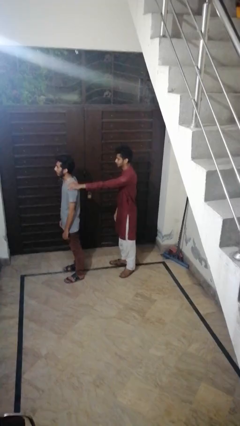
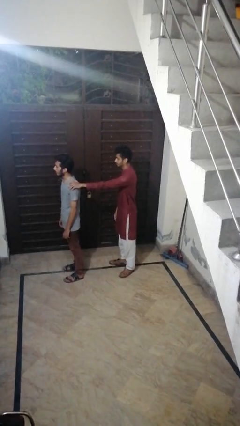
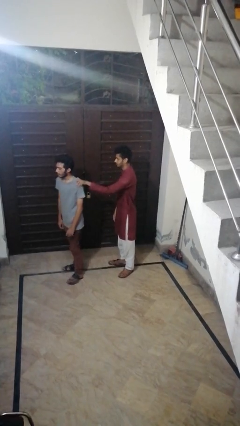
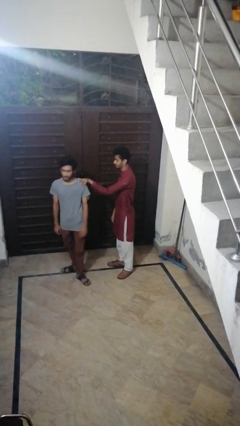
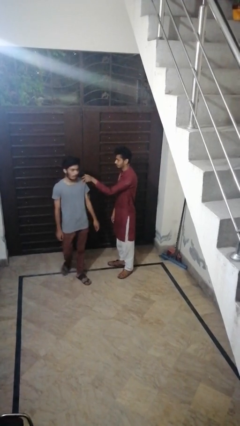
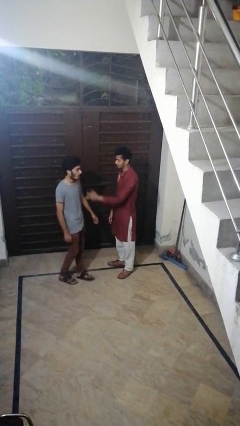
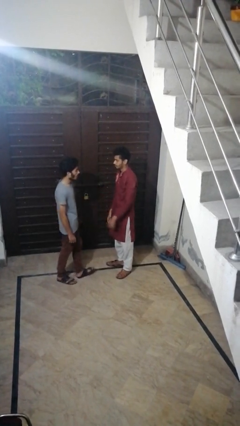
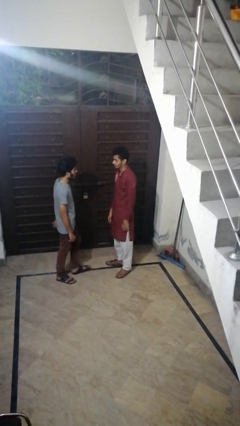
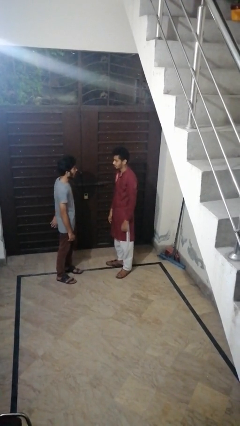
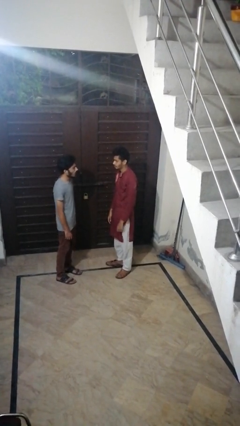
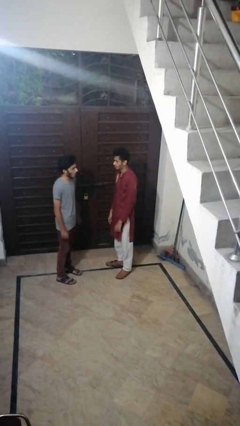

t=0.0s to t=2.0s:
person spins person around

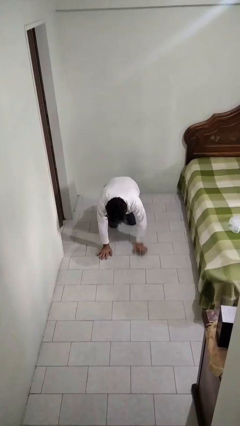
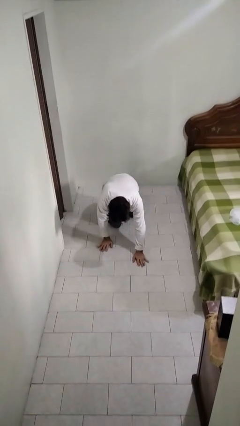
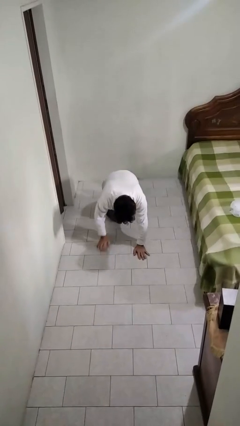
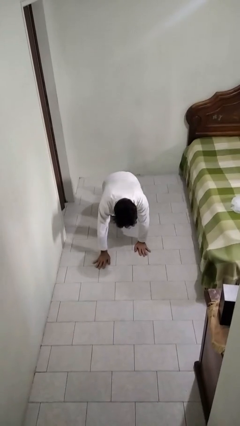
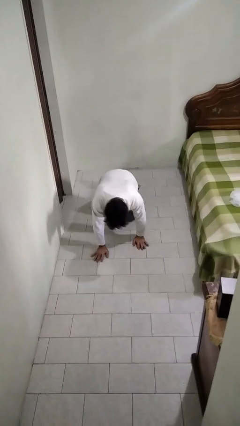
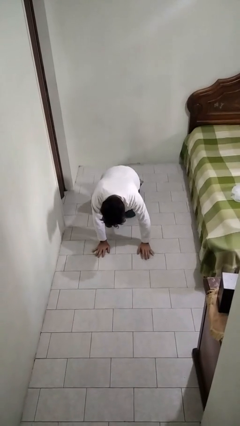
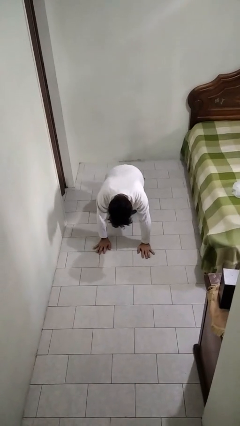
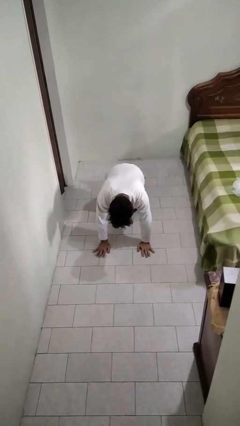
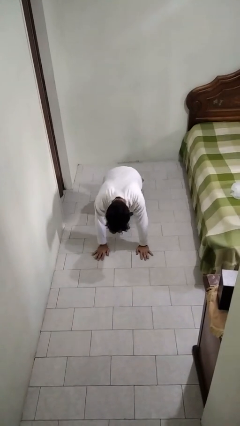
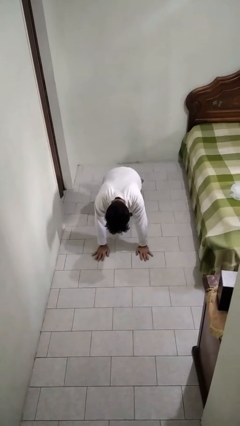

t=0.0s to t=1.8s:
person crawls

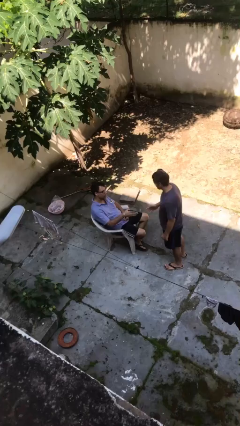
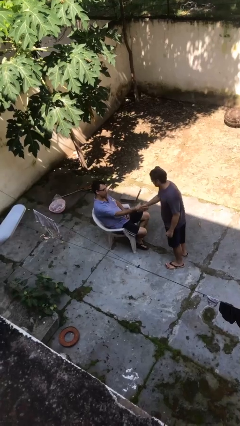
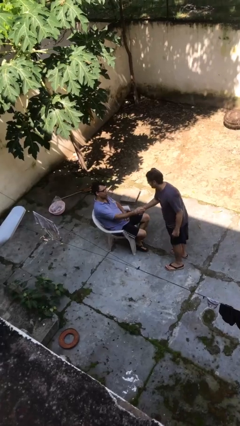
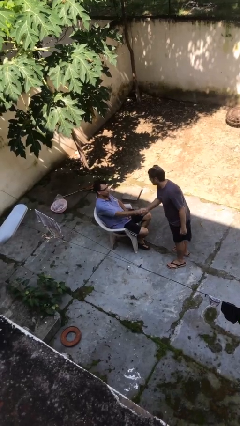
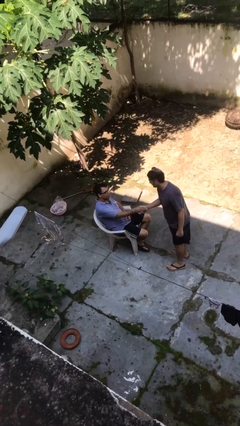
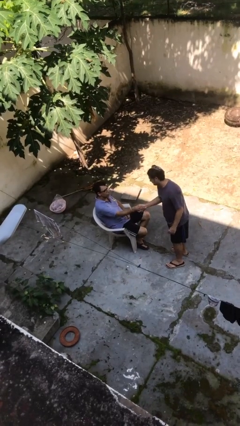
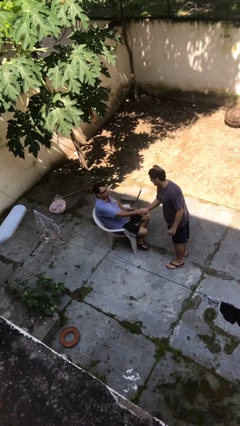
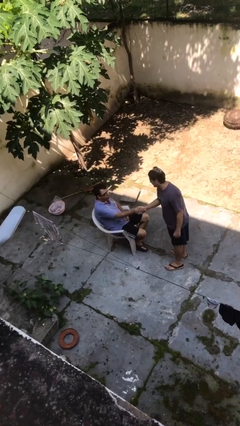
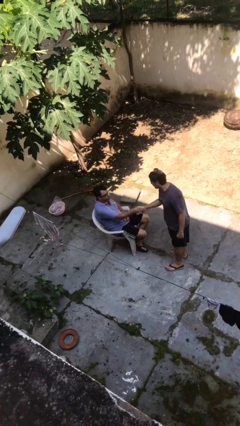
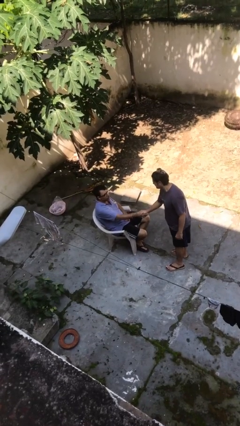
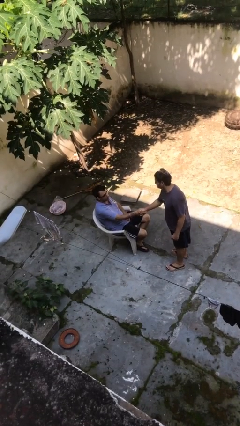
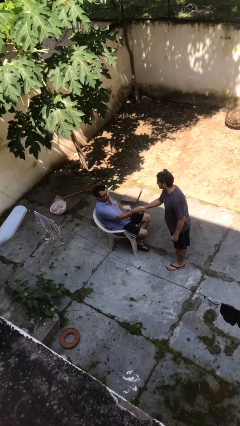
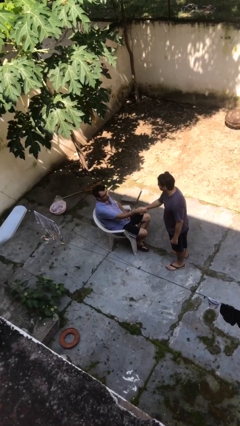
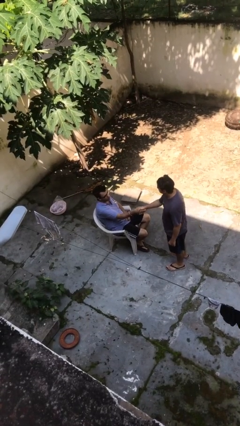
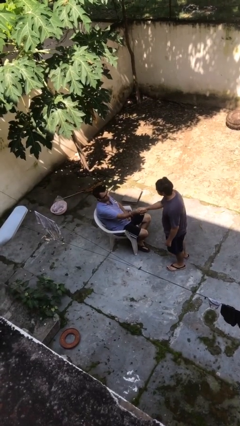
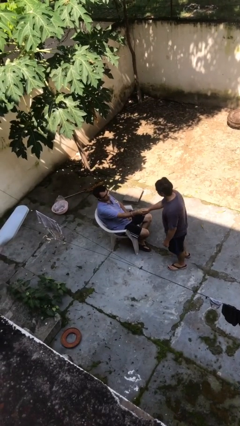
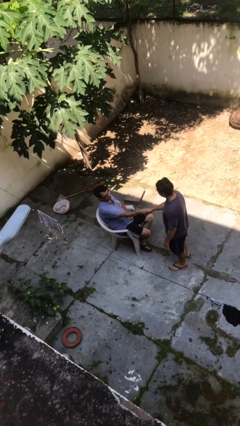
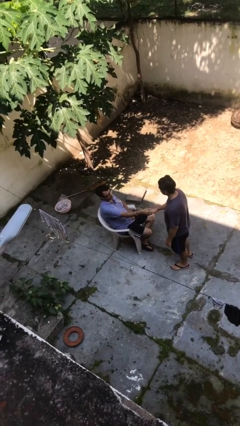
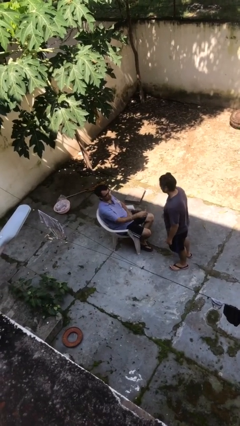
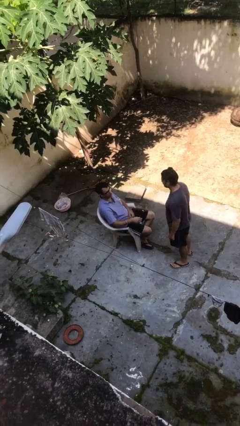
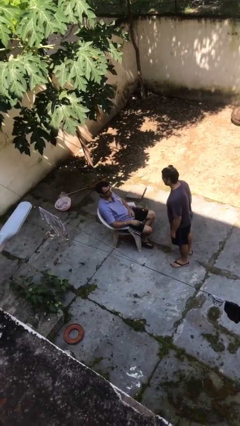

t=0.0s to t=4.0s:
person shakes hand

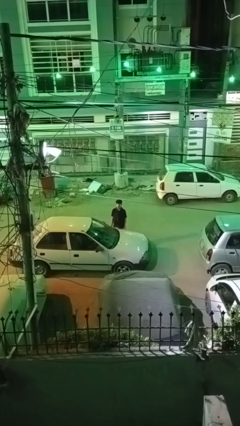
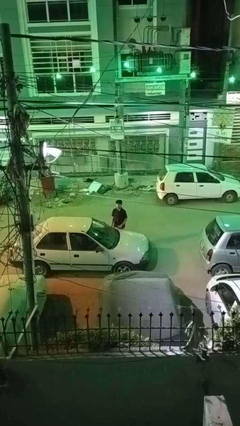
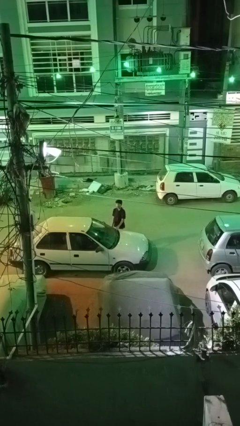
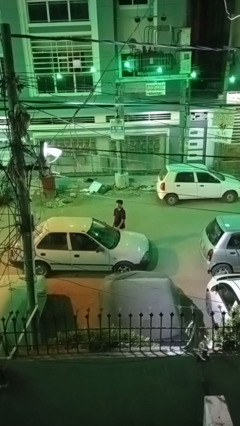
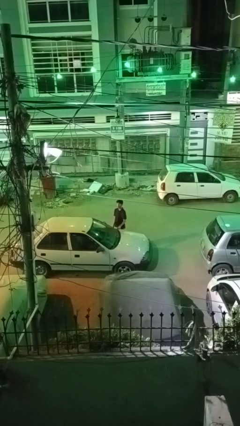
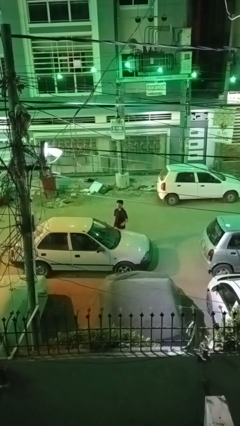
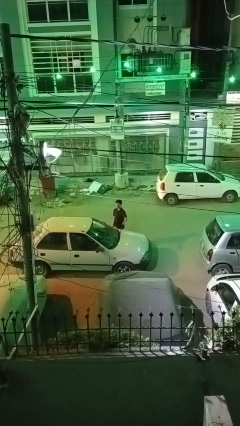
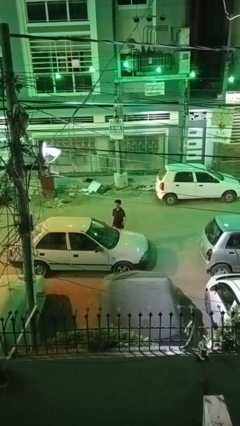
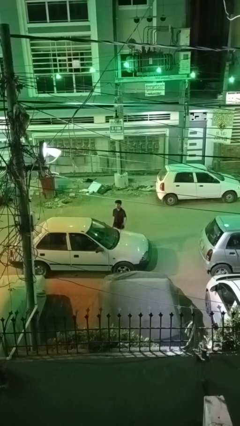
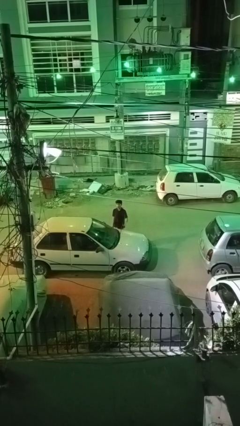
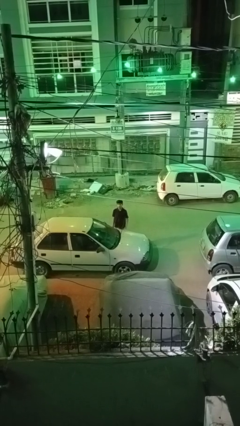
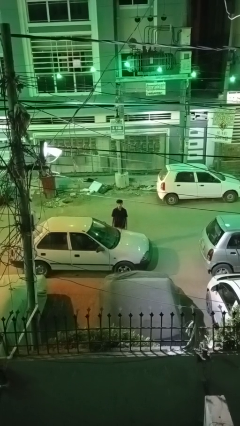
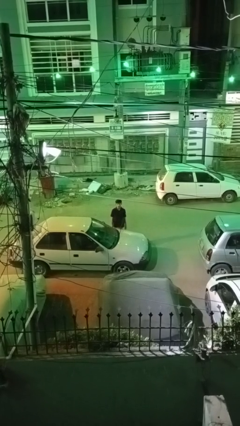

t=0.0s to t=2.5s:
person flips up car wipers

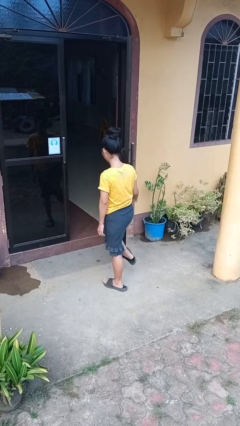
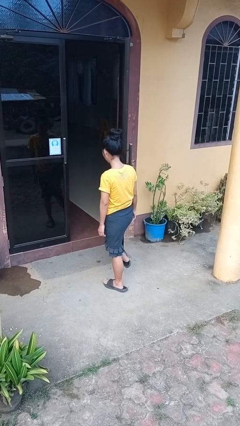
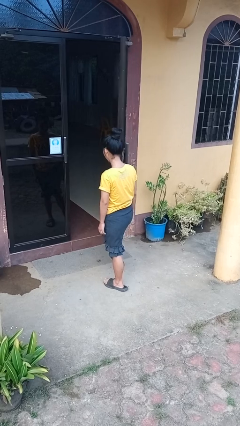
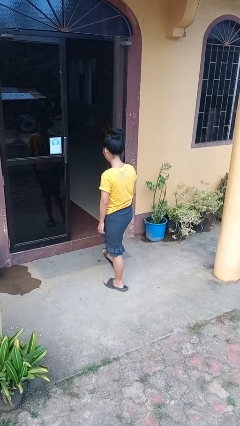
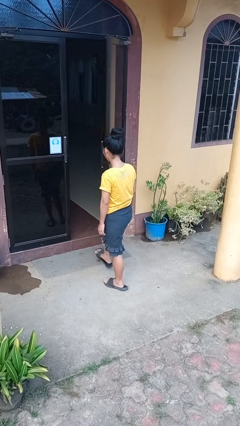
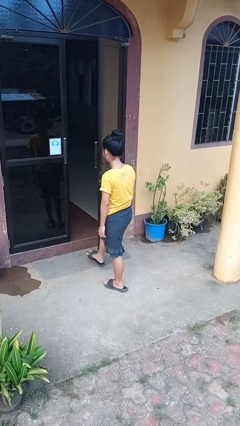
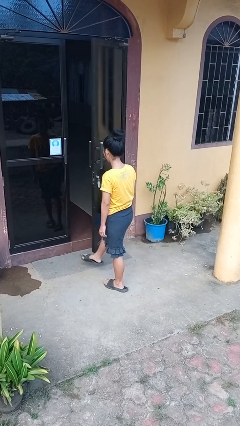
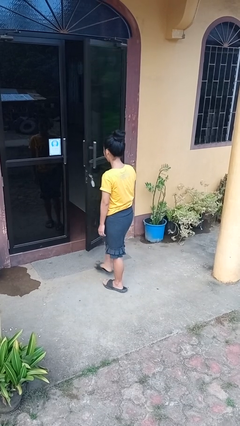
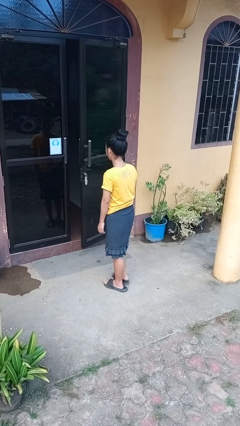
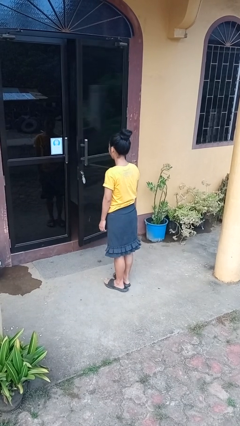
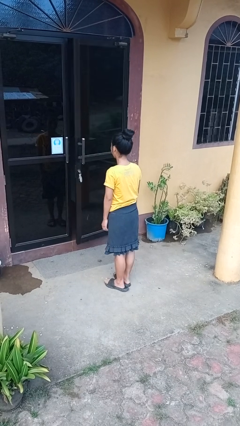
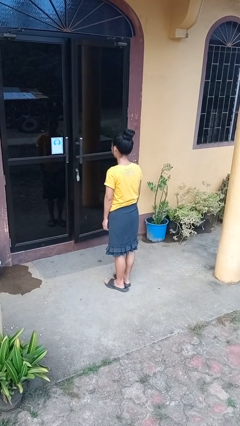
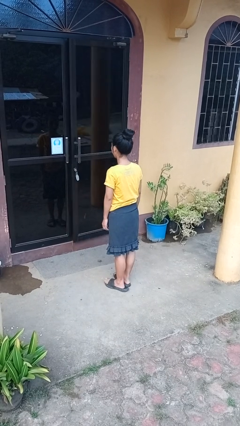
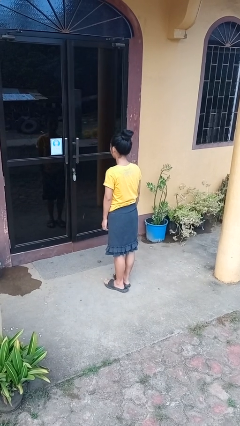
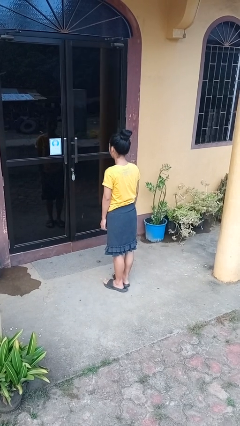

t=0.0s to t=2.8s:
person closes door with foot

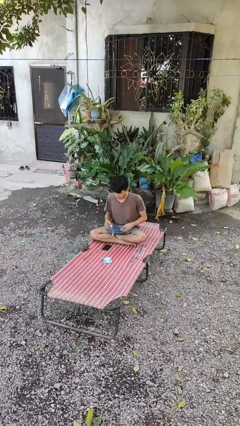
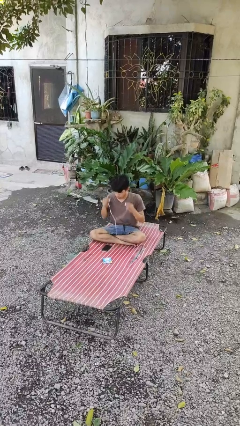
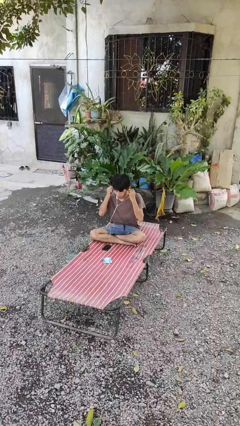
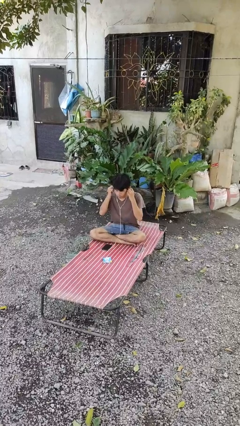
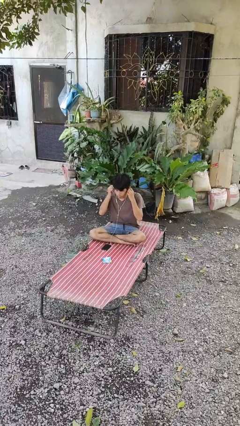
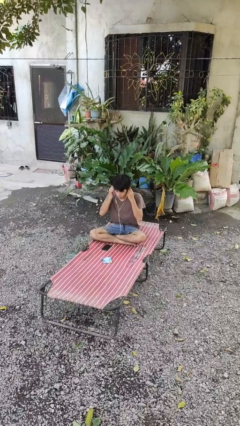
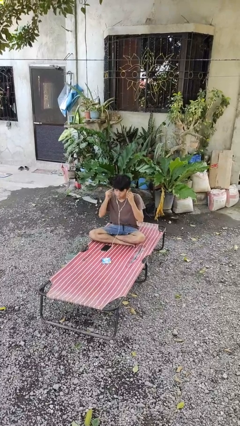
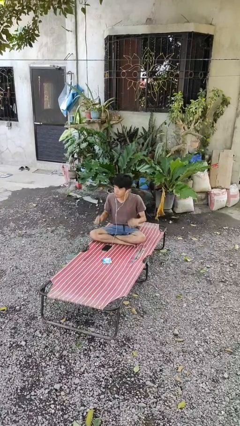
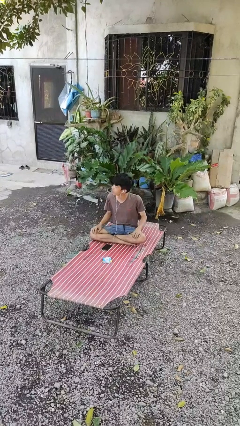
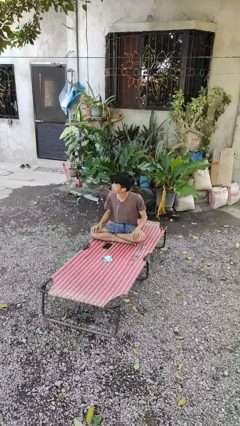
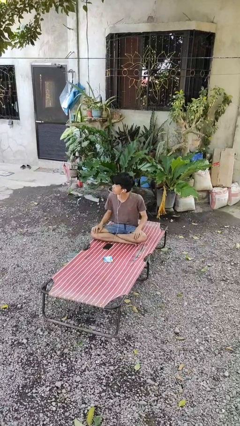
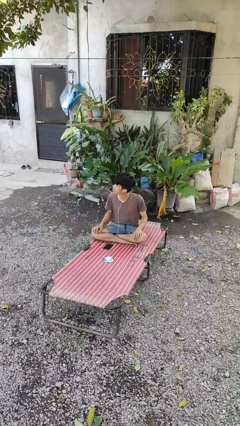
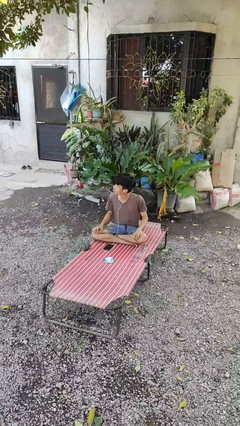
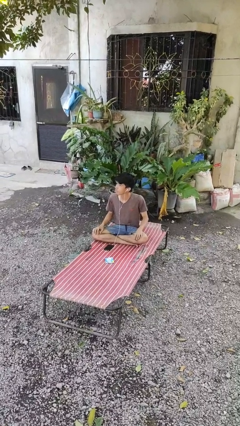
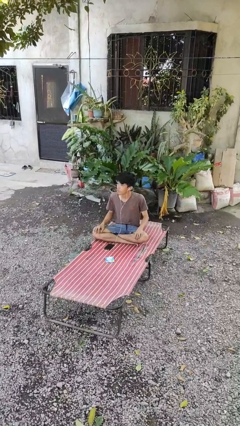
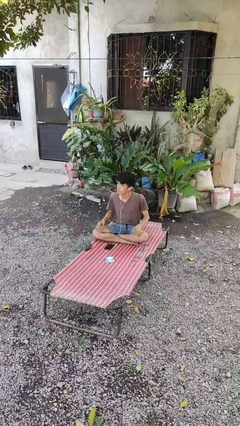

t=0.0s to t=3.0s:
person puts on headphones

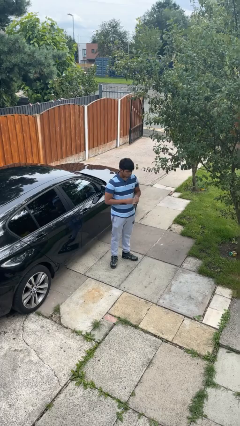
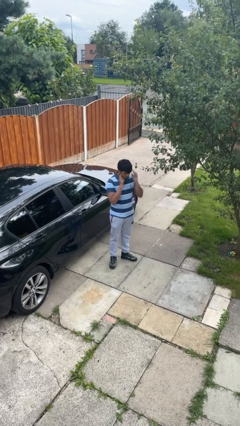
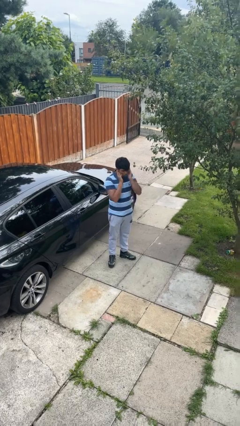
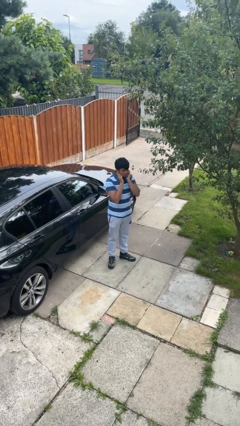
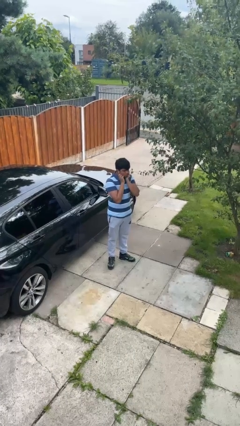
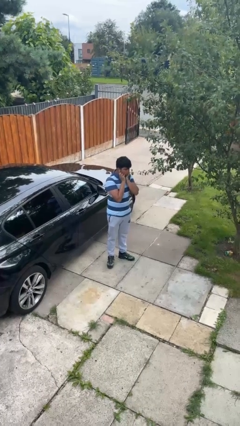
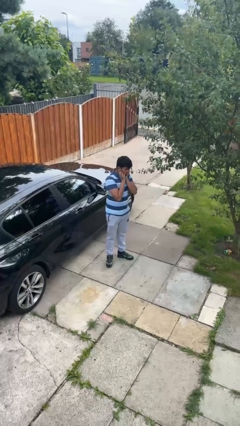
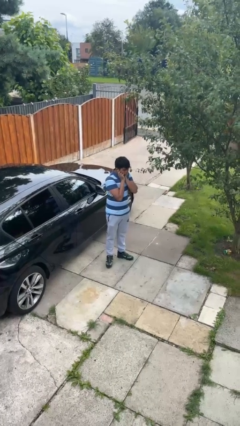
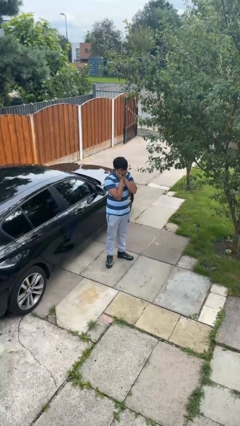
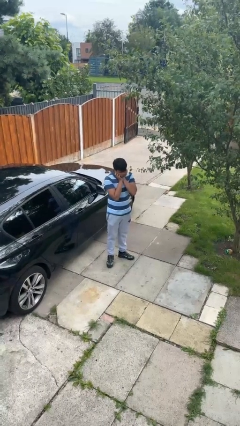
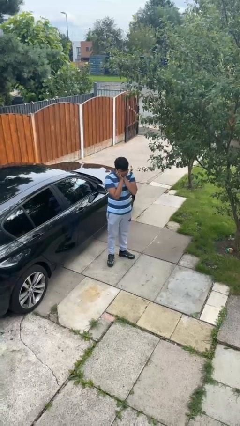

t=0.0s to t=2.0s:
person puts fingers in ear
